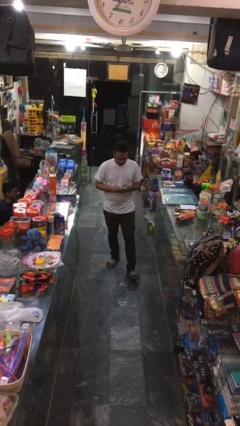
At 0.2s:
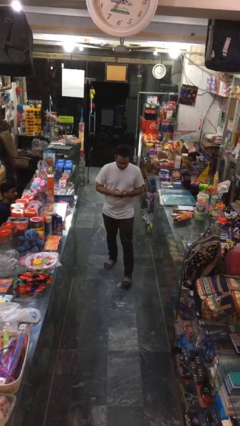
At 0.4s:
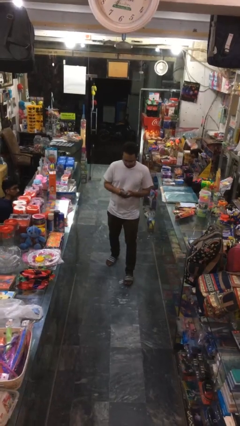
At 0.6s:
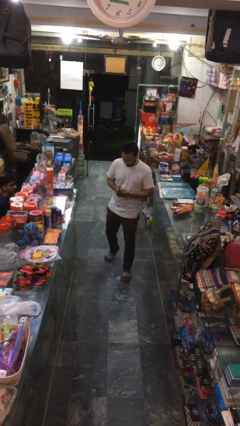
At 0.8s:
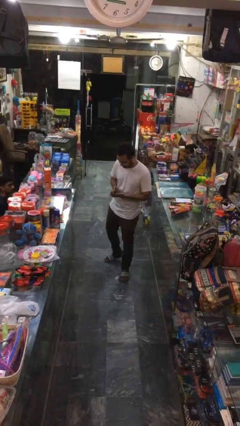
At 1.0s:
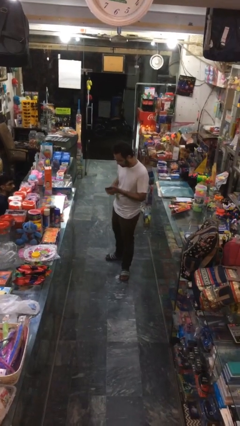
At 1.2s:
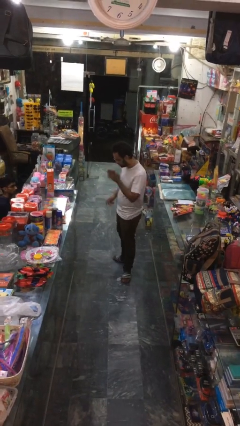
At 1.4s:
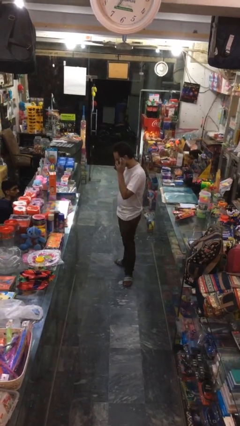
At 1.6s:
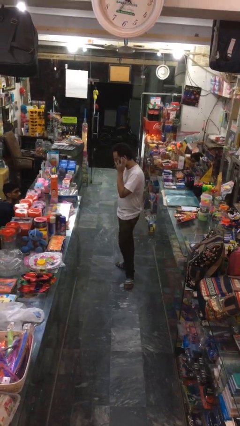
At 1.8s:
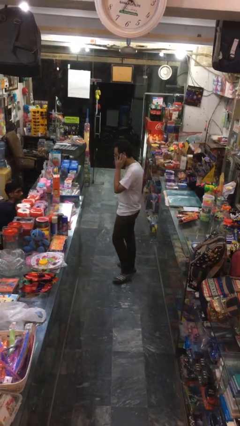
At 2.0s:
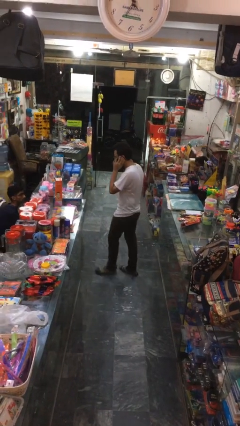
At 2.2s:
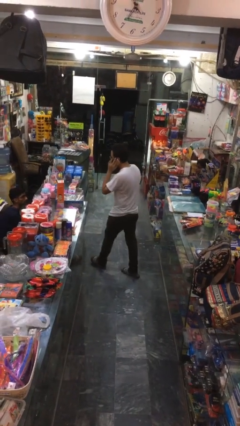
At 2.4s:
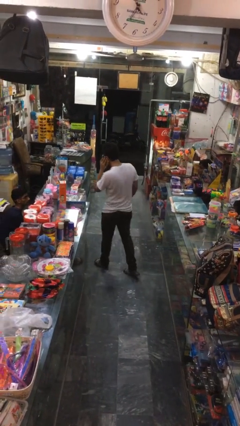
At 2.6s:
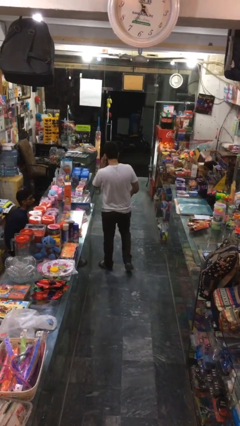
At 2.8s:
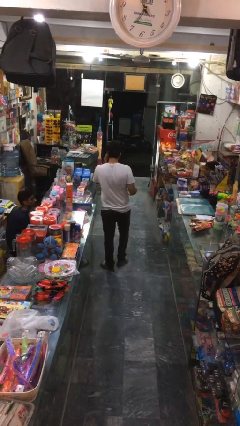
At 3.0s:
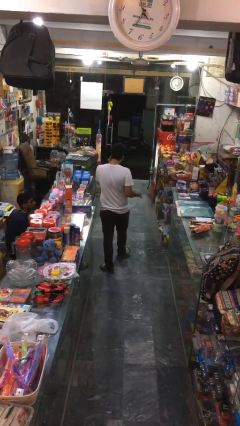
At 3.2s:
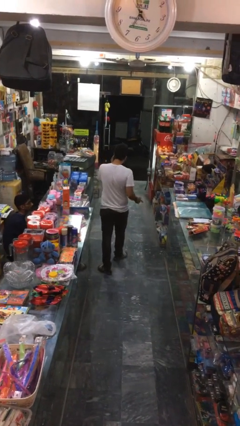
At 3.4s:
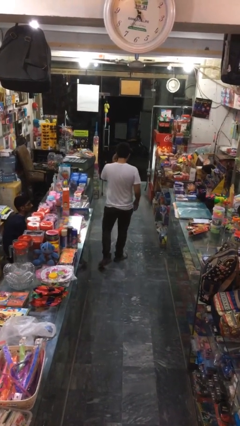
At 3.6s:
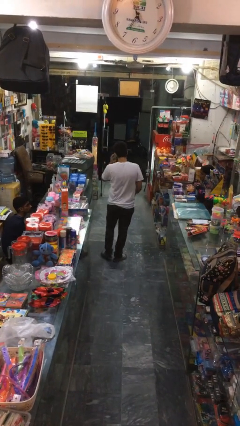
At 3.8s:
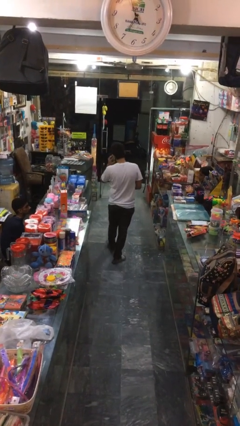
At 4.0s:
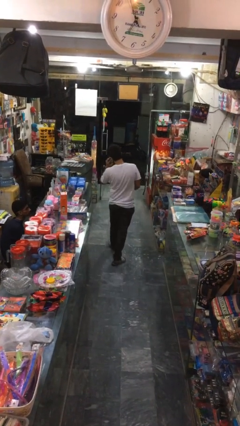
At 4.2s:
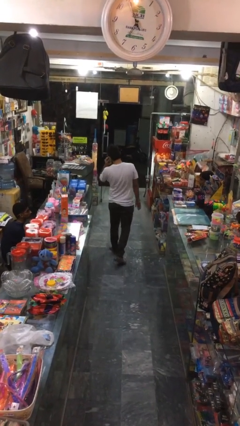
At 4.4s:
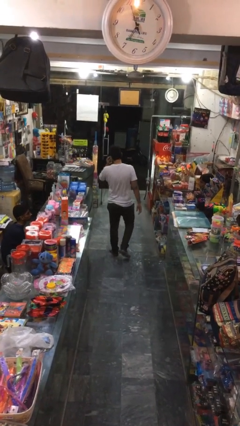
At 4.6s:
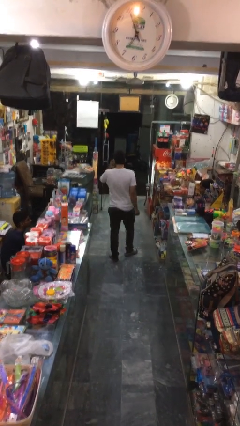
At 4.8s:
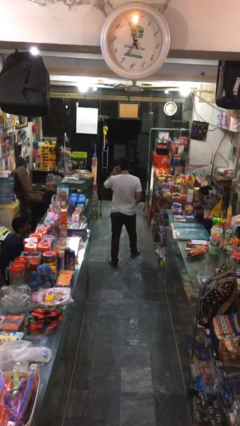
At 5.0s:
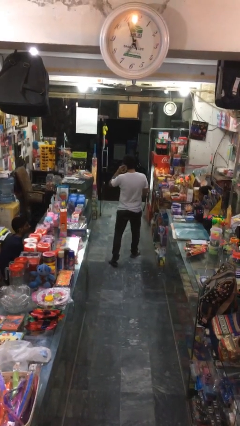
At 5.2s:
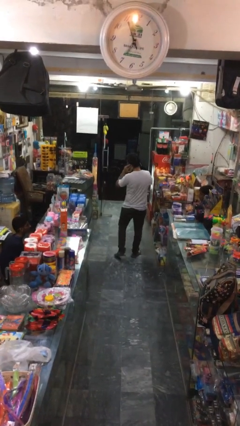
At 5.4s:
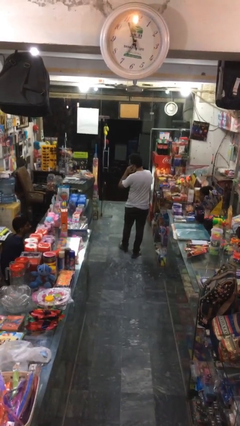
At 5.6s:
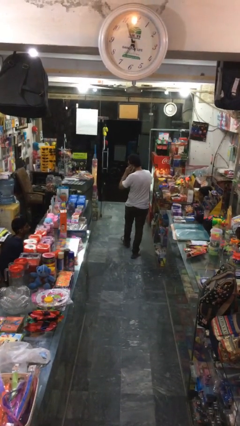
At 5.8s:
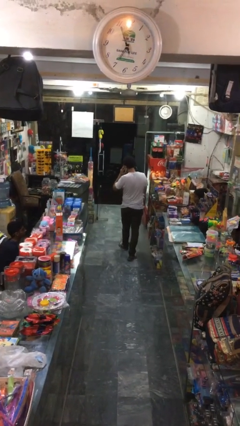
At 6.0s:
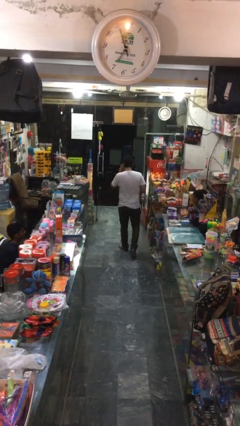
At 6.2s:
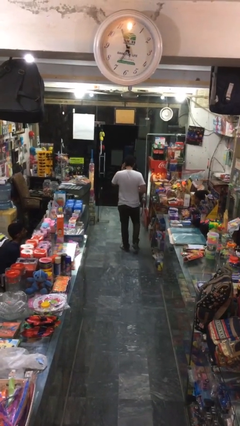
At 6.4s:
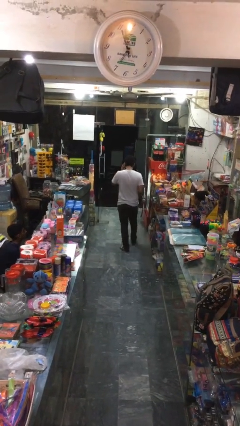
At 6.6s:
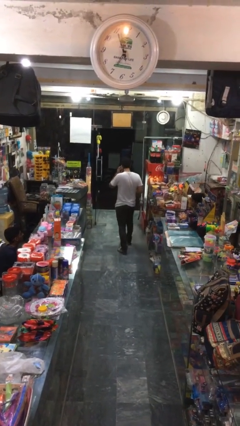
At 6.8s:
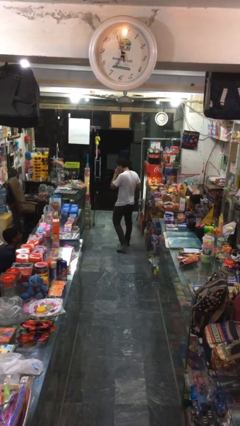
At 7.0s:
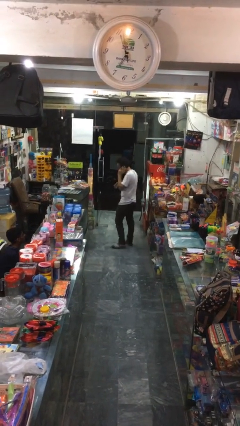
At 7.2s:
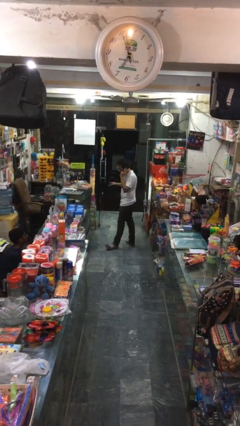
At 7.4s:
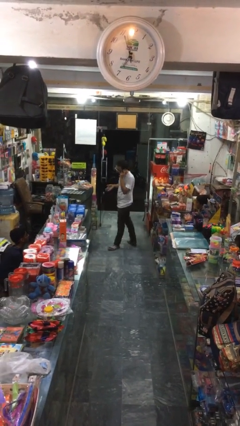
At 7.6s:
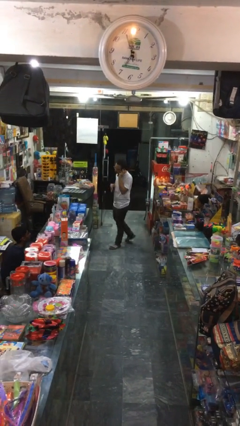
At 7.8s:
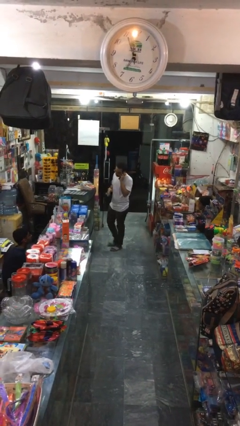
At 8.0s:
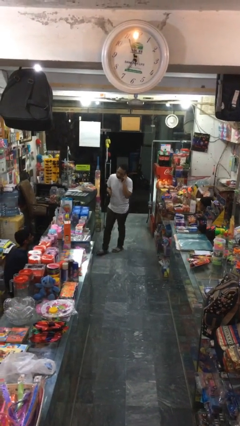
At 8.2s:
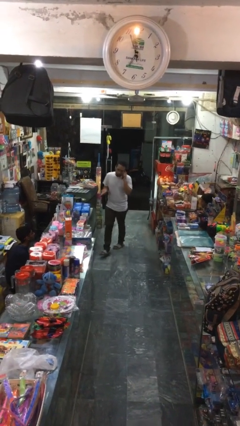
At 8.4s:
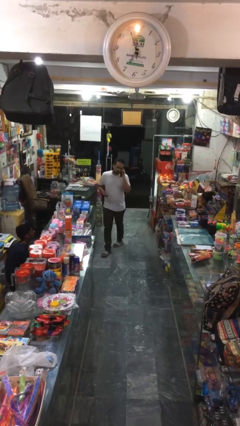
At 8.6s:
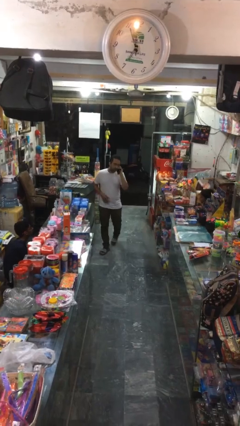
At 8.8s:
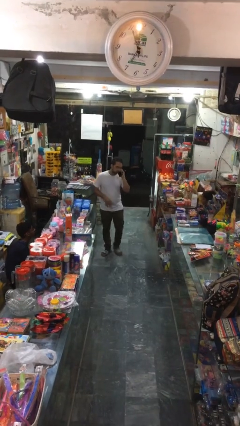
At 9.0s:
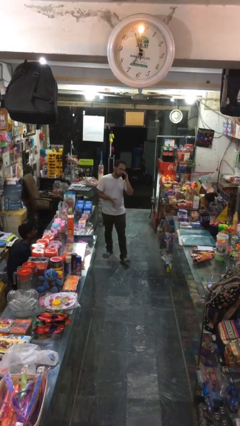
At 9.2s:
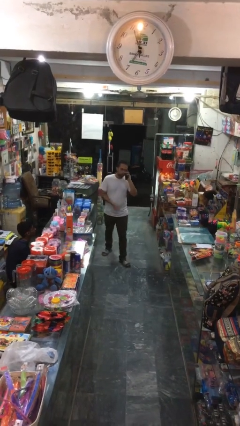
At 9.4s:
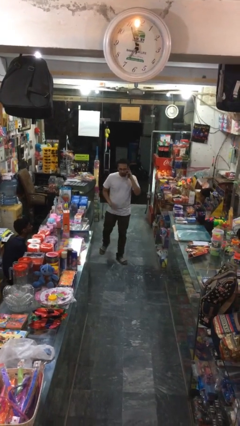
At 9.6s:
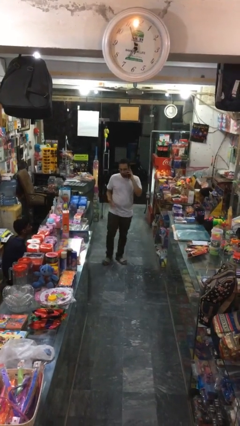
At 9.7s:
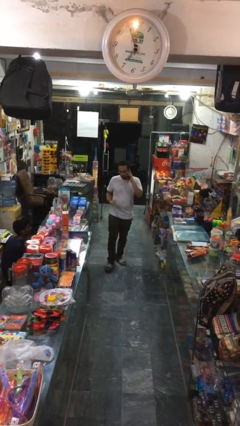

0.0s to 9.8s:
person talks on phone

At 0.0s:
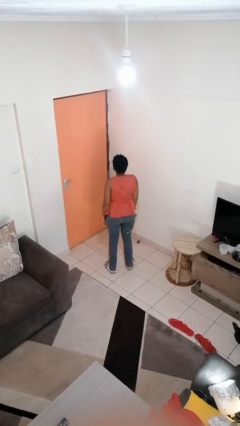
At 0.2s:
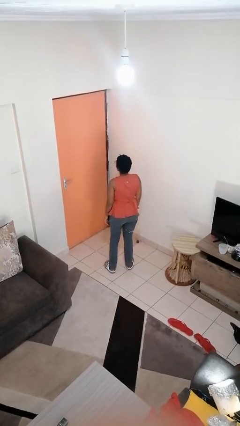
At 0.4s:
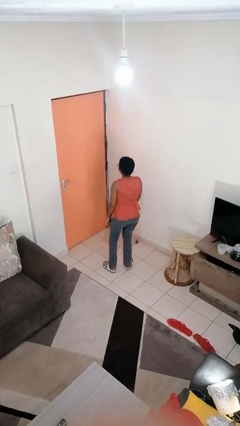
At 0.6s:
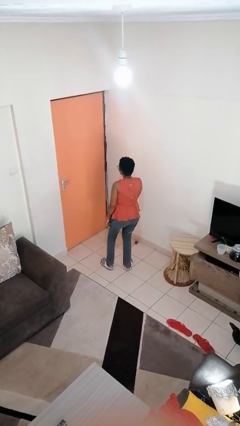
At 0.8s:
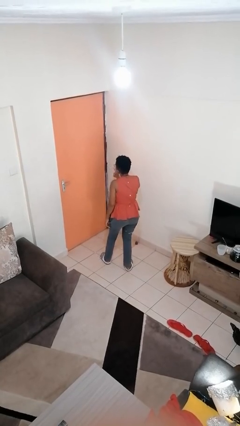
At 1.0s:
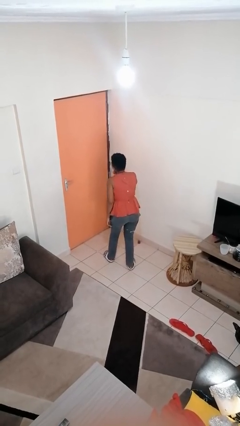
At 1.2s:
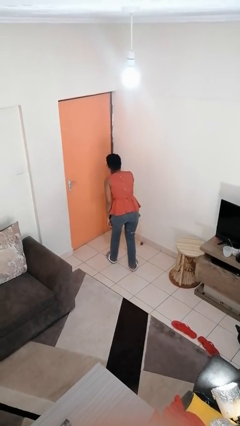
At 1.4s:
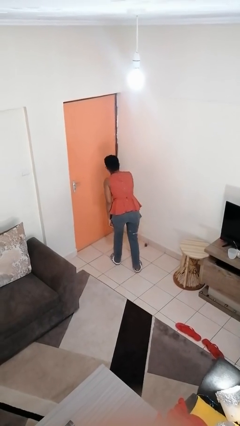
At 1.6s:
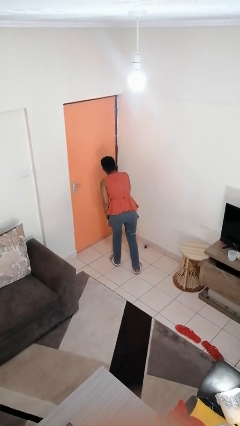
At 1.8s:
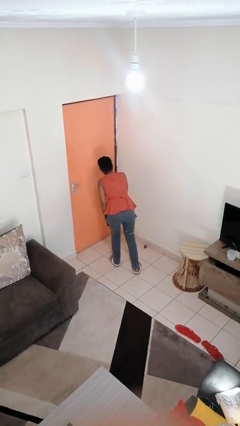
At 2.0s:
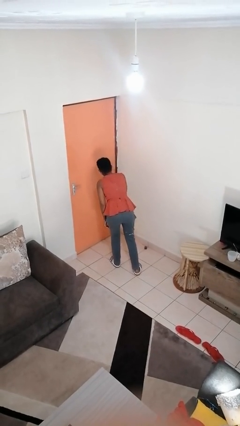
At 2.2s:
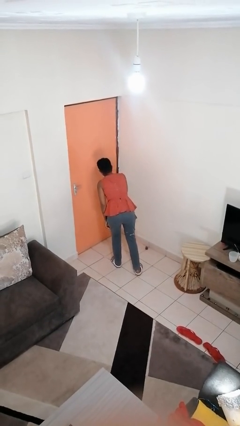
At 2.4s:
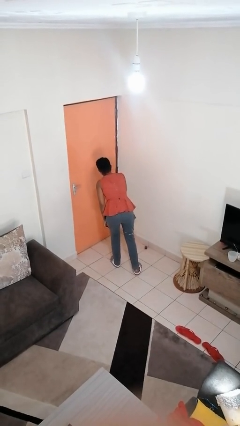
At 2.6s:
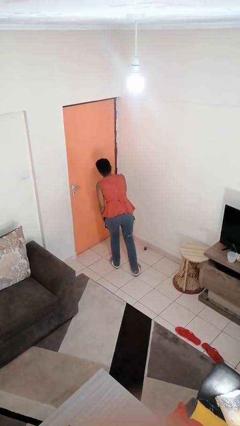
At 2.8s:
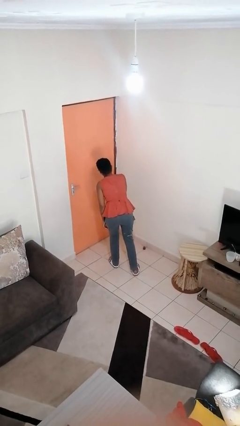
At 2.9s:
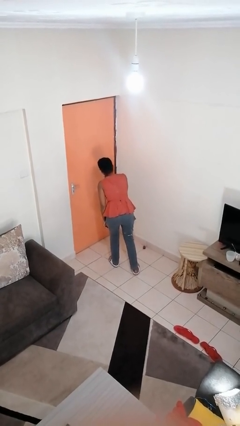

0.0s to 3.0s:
person gestures be quiet

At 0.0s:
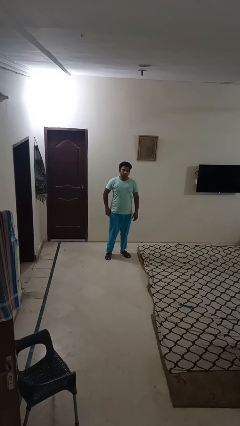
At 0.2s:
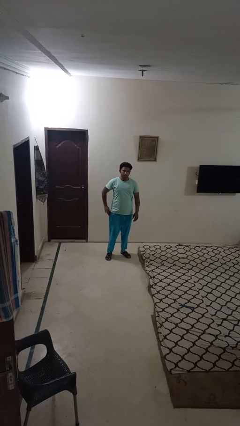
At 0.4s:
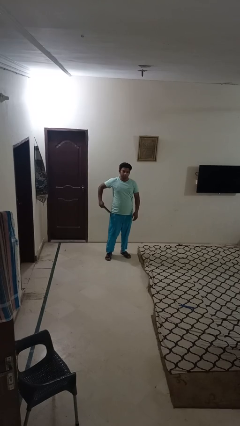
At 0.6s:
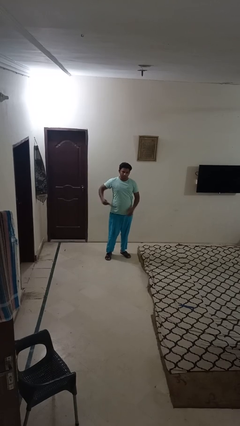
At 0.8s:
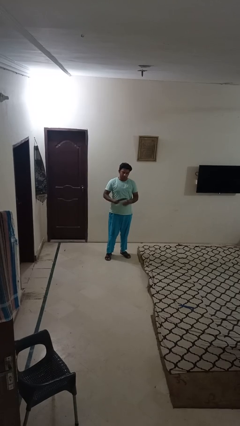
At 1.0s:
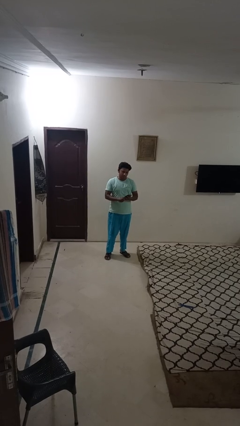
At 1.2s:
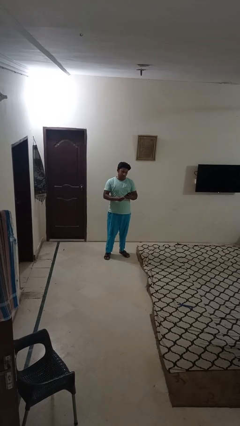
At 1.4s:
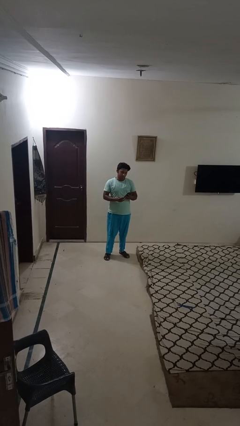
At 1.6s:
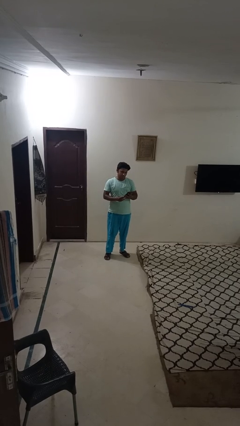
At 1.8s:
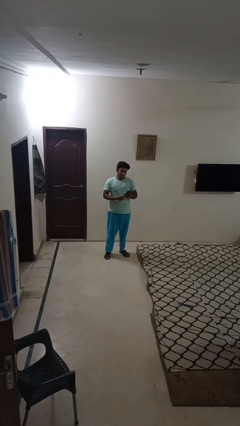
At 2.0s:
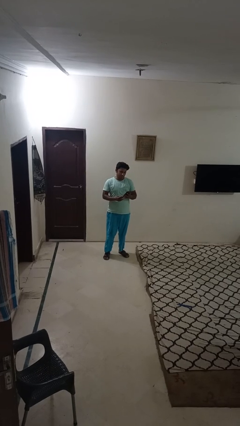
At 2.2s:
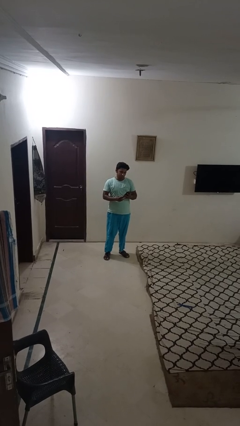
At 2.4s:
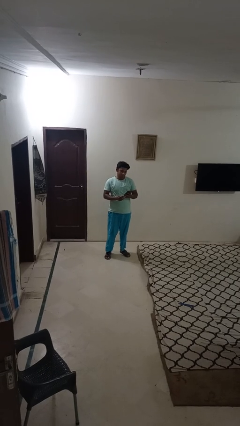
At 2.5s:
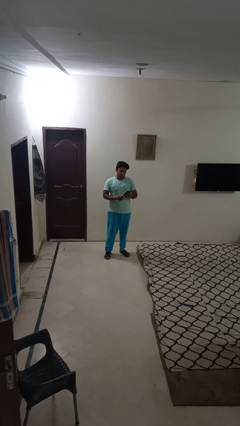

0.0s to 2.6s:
person takes phone from pocket

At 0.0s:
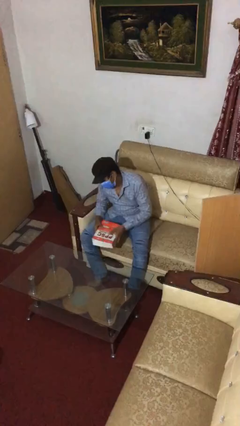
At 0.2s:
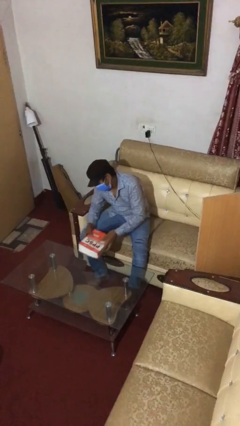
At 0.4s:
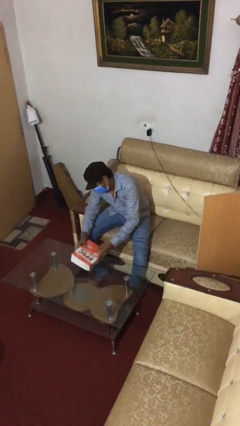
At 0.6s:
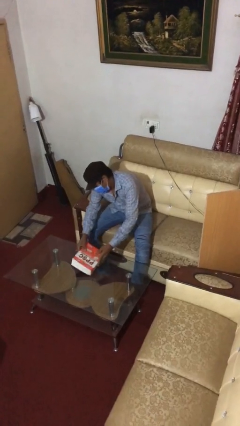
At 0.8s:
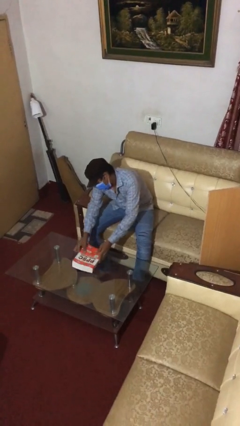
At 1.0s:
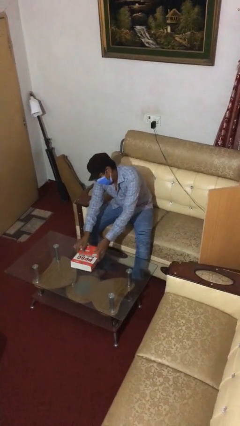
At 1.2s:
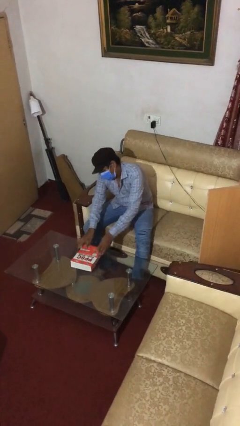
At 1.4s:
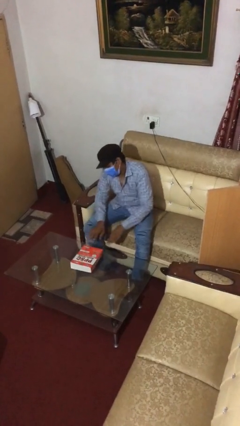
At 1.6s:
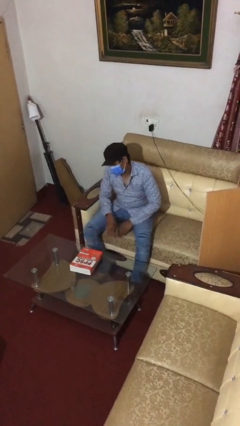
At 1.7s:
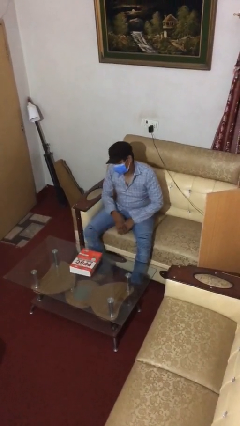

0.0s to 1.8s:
person puts down object on table

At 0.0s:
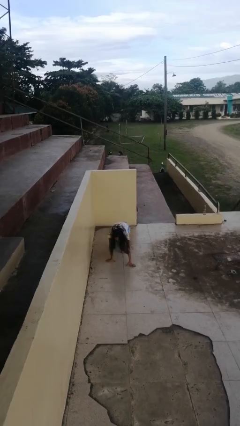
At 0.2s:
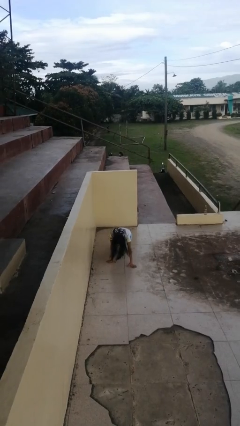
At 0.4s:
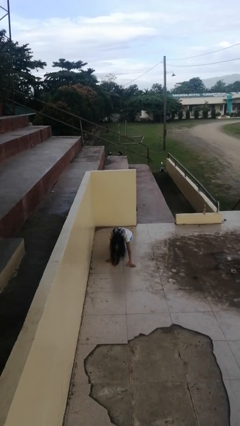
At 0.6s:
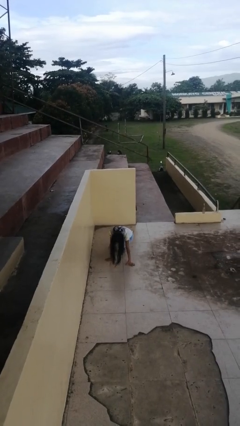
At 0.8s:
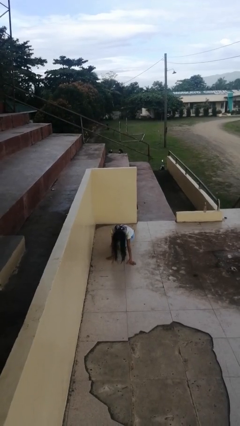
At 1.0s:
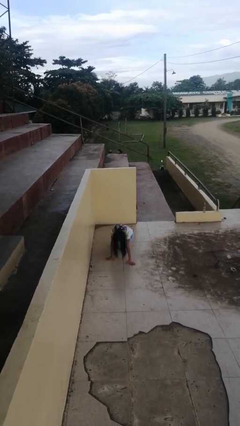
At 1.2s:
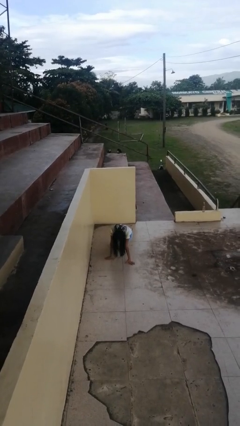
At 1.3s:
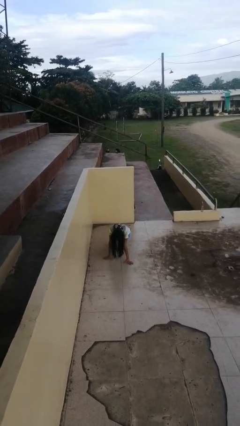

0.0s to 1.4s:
person lies down on floor
